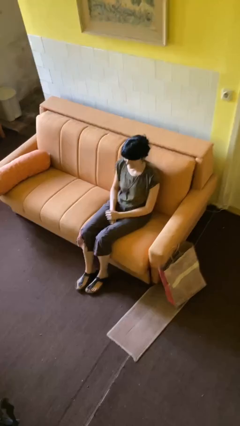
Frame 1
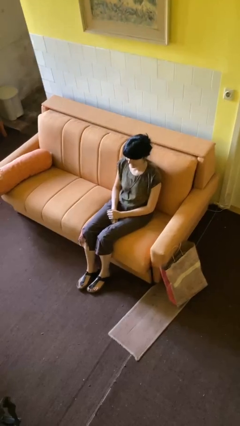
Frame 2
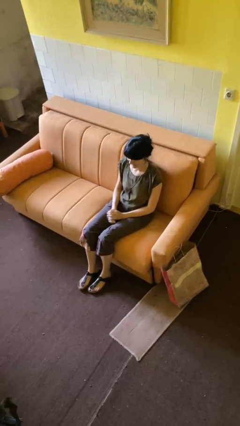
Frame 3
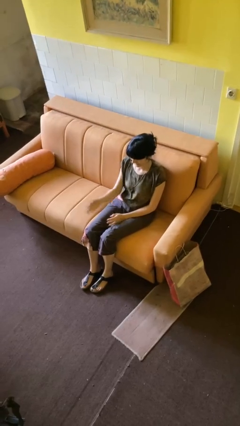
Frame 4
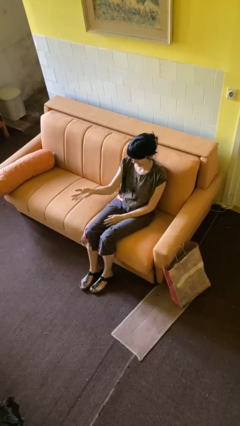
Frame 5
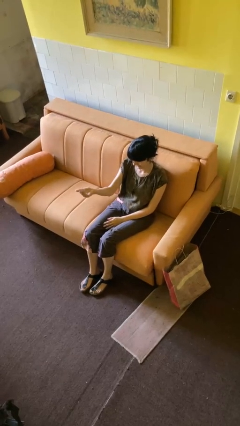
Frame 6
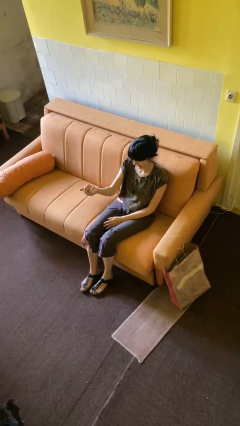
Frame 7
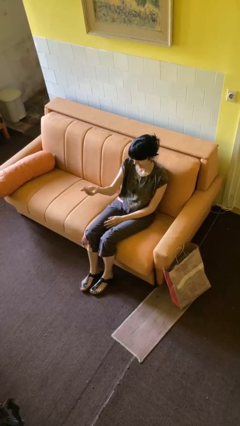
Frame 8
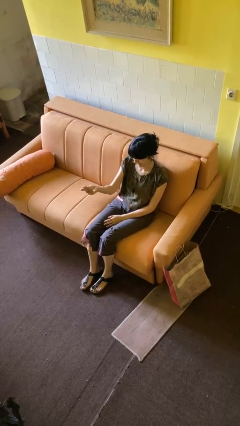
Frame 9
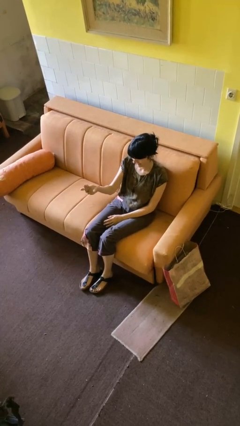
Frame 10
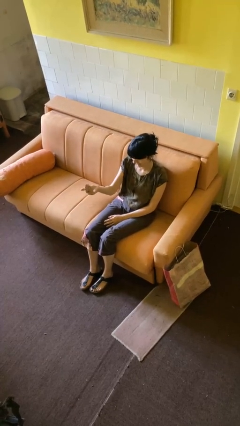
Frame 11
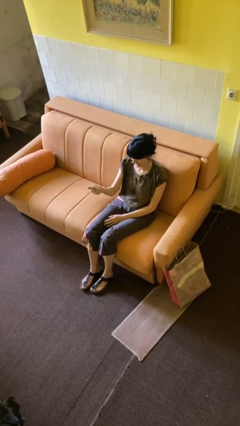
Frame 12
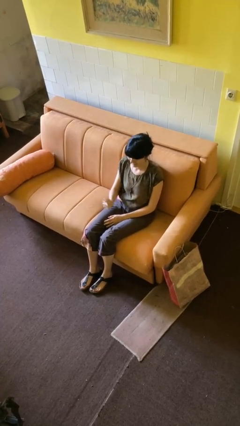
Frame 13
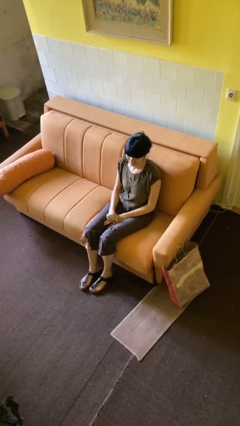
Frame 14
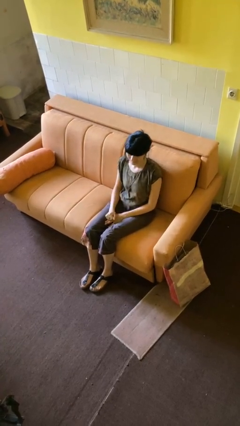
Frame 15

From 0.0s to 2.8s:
person gestures come here

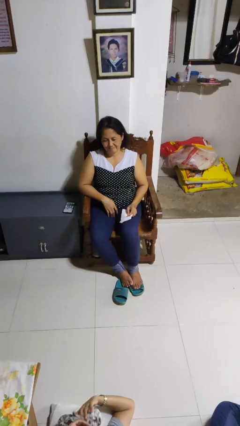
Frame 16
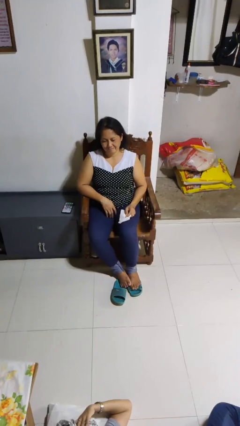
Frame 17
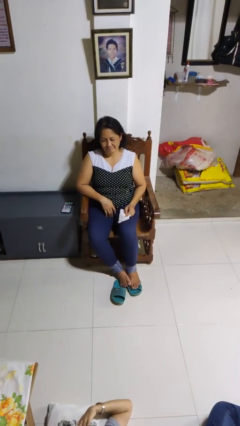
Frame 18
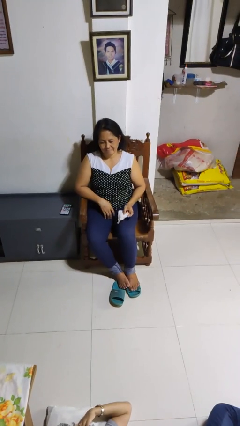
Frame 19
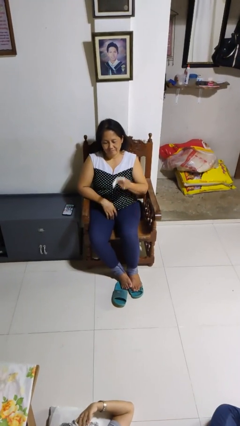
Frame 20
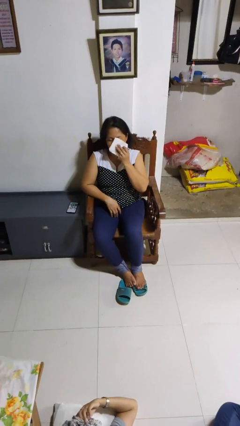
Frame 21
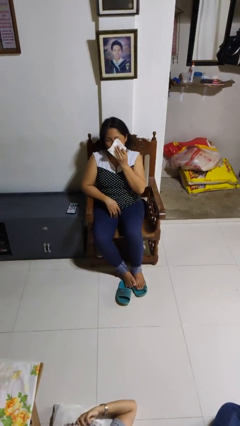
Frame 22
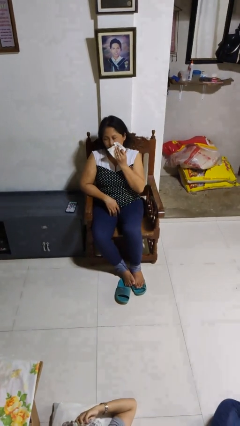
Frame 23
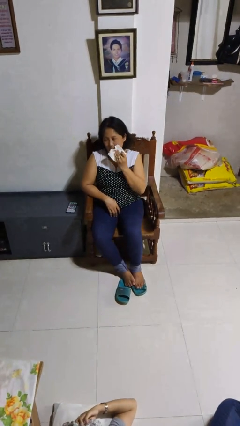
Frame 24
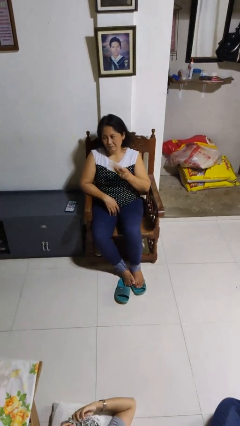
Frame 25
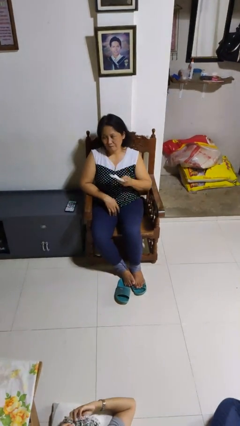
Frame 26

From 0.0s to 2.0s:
person wipes mouth with napkin

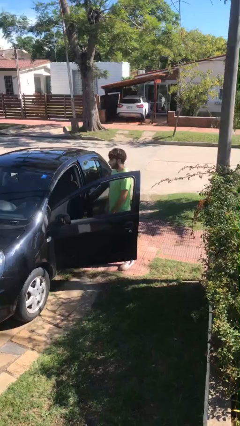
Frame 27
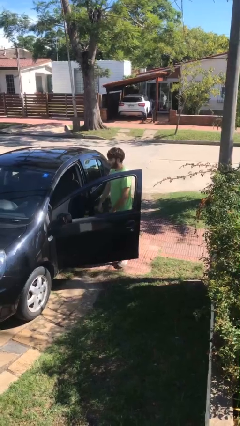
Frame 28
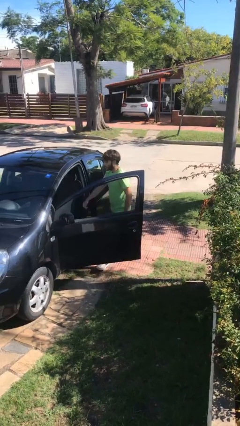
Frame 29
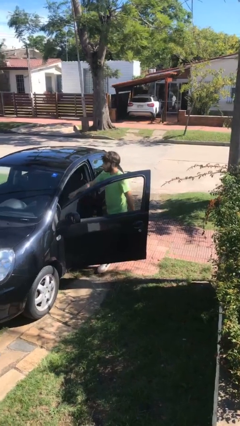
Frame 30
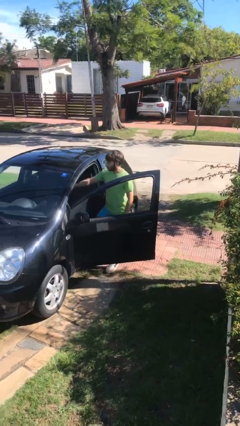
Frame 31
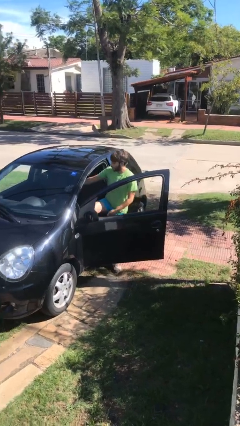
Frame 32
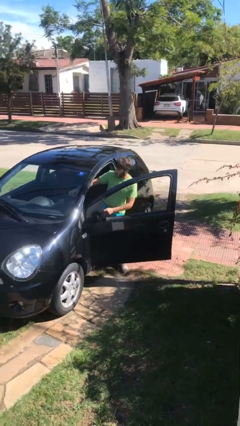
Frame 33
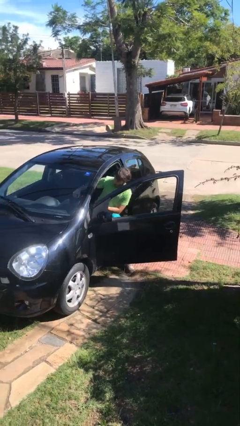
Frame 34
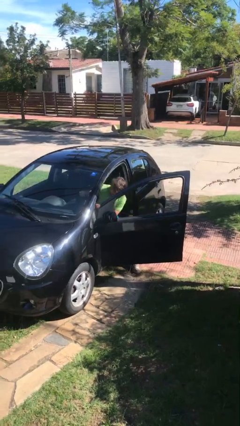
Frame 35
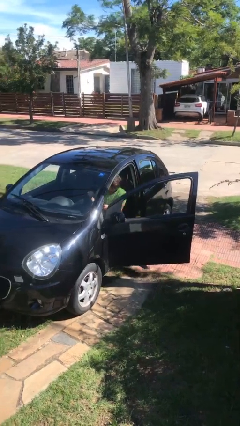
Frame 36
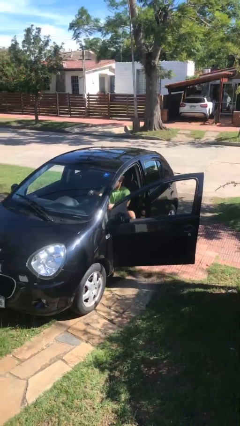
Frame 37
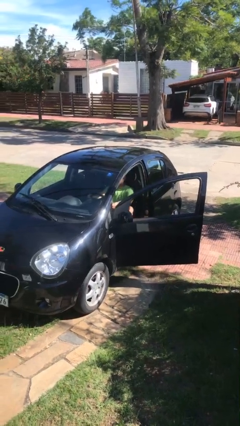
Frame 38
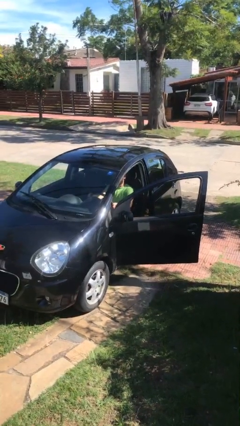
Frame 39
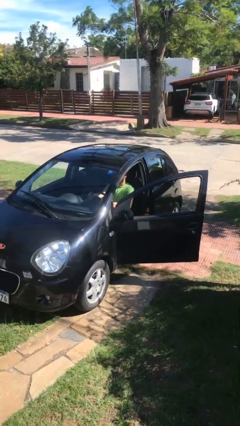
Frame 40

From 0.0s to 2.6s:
person enters car

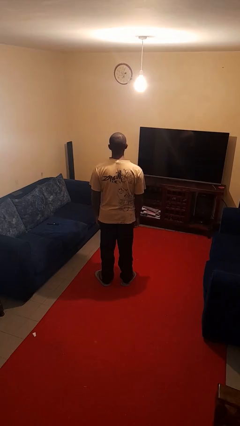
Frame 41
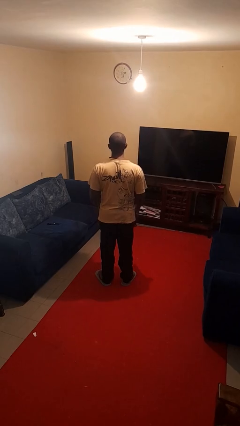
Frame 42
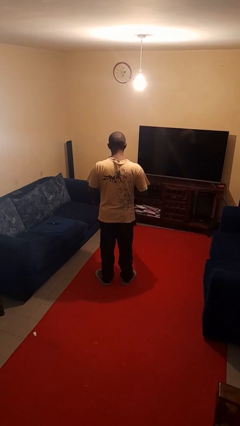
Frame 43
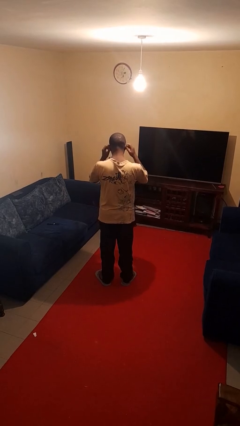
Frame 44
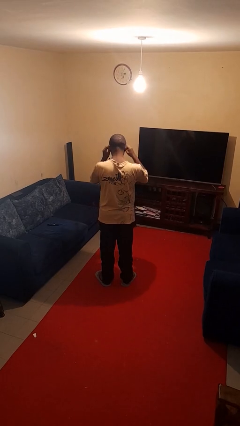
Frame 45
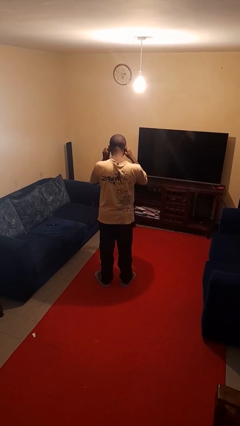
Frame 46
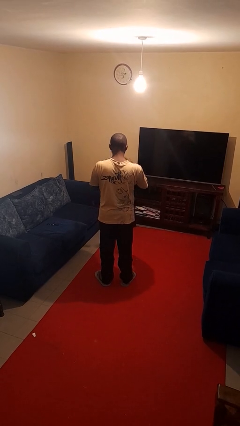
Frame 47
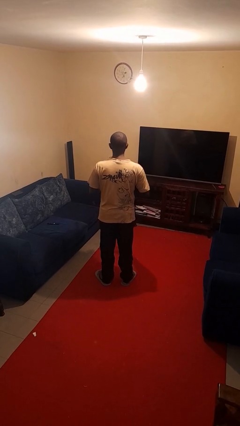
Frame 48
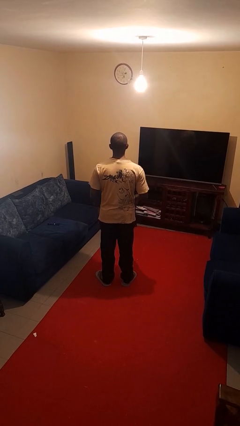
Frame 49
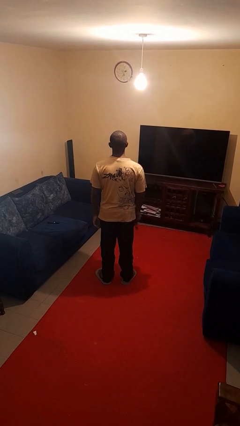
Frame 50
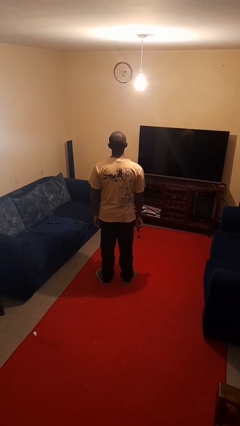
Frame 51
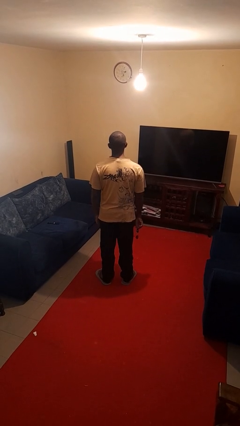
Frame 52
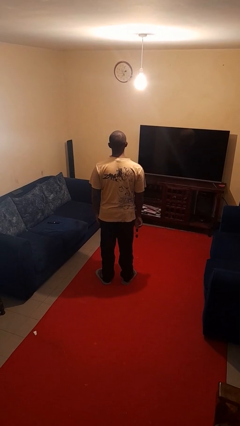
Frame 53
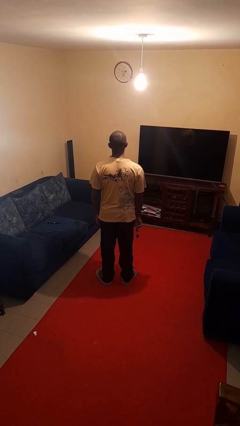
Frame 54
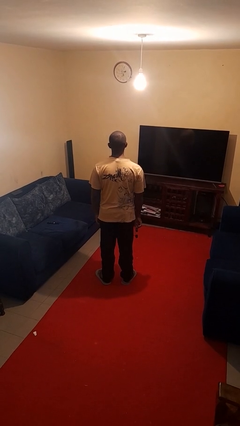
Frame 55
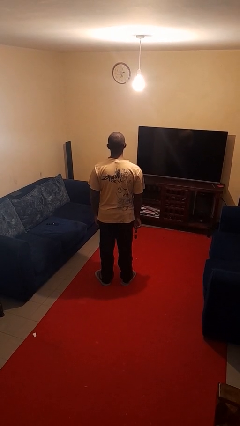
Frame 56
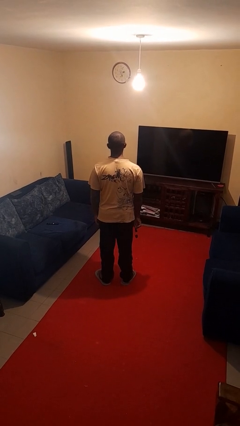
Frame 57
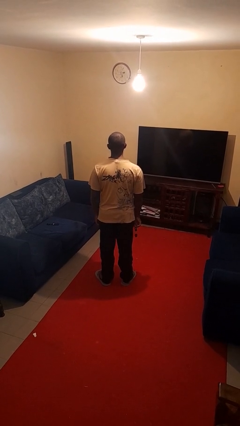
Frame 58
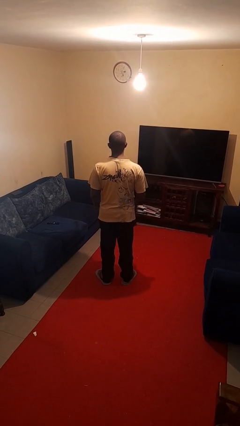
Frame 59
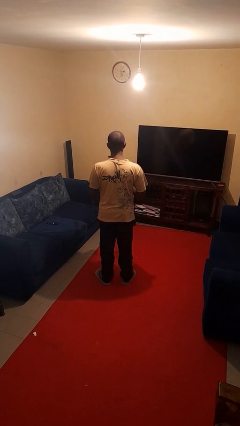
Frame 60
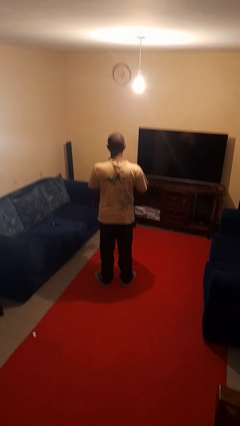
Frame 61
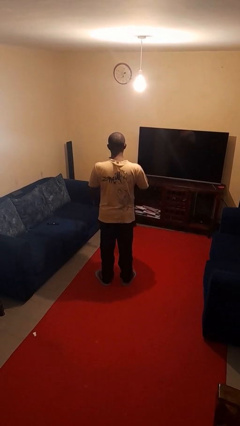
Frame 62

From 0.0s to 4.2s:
person takes off sunglasses

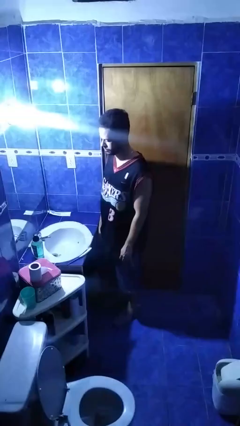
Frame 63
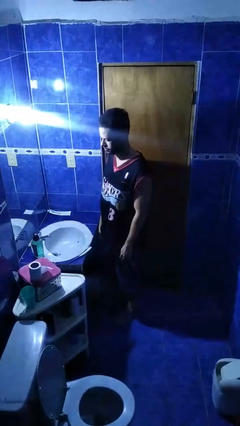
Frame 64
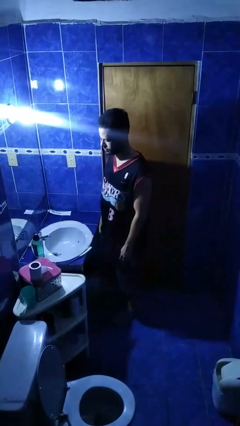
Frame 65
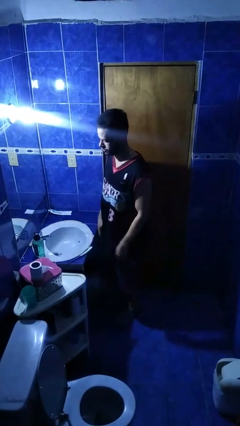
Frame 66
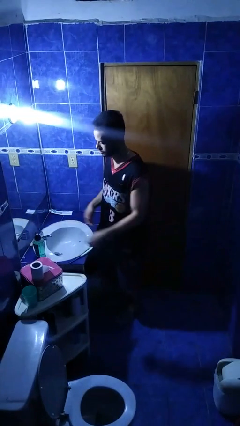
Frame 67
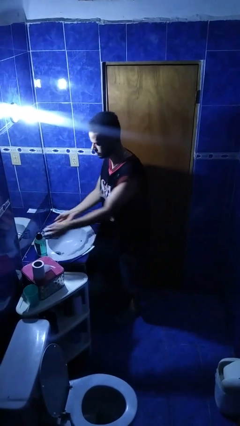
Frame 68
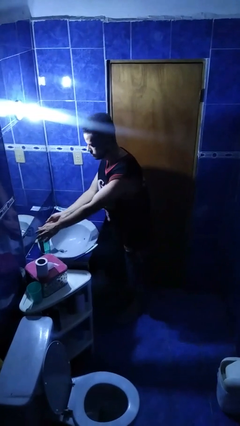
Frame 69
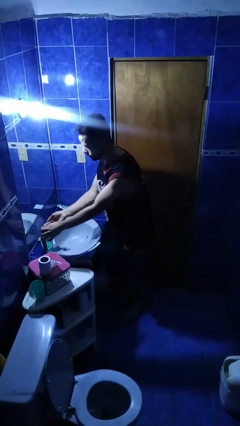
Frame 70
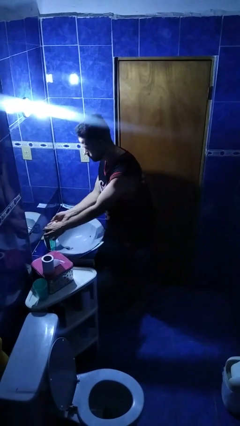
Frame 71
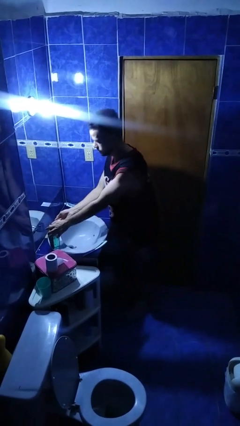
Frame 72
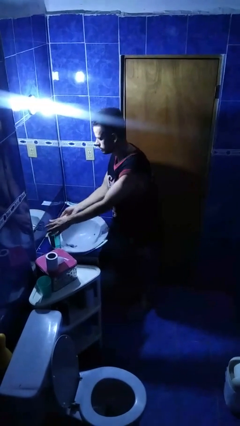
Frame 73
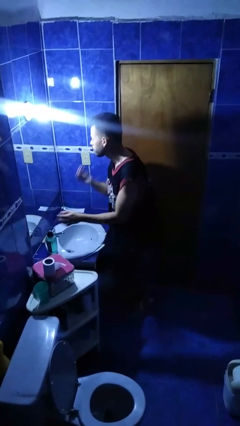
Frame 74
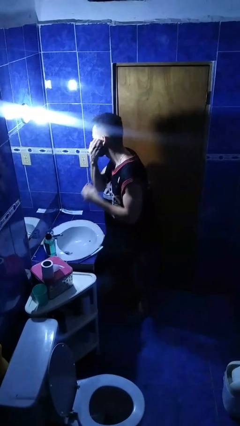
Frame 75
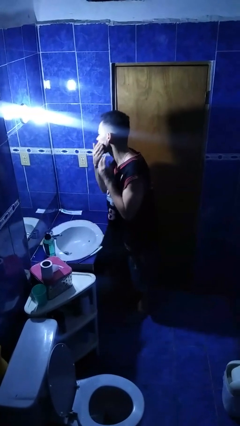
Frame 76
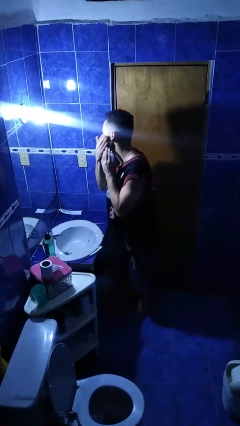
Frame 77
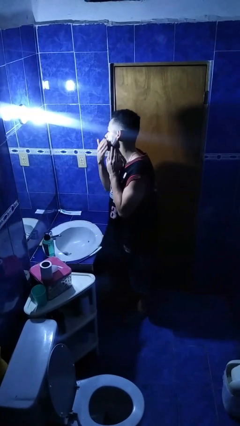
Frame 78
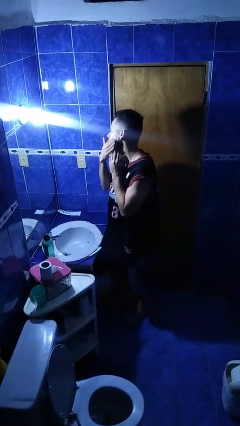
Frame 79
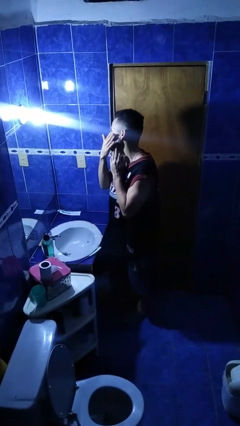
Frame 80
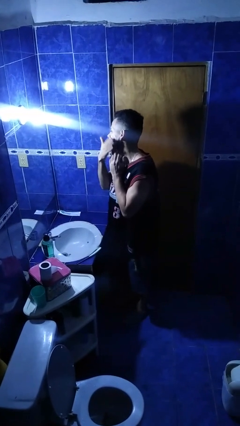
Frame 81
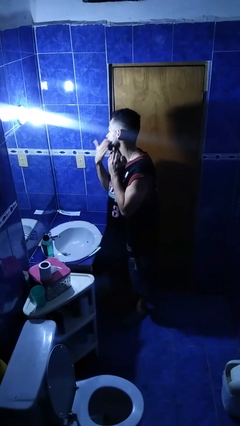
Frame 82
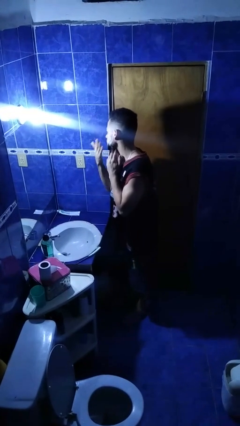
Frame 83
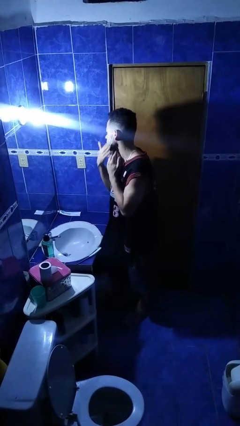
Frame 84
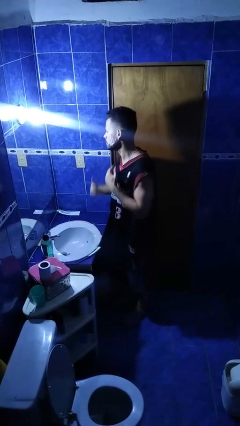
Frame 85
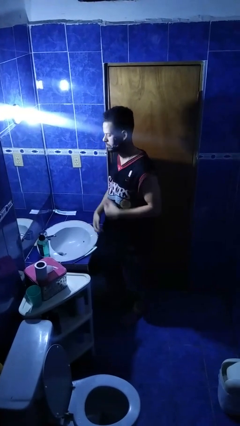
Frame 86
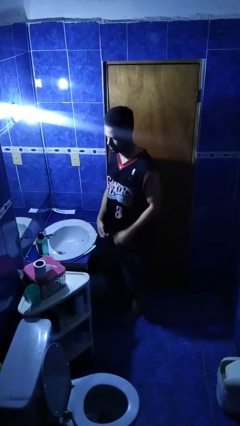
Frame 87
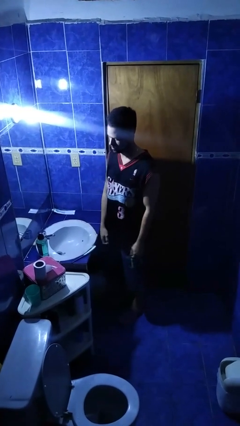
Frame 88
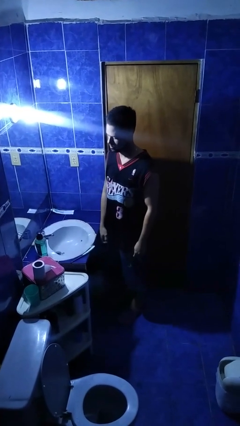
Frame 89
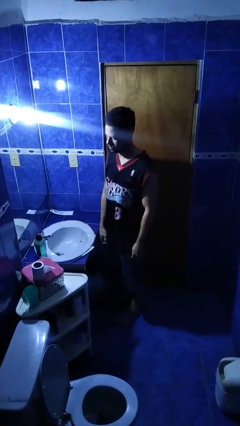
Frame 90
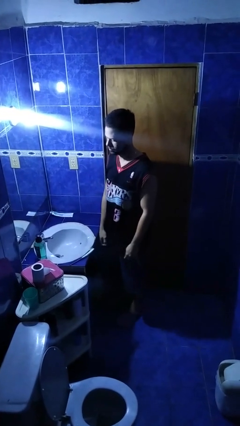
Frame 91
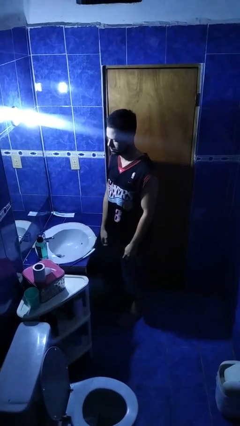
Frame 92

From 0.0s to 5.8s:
person applies shaving cream

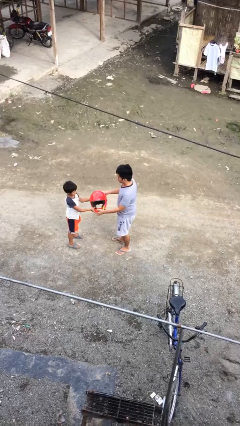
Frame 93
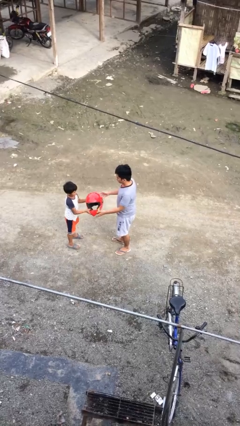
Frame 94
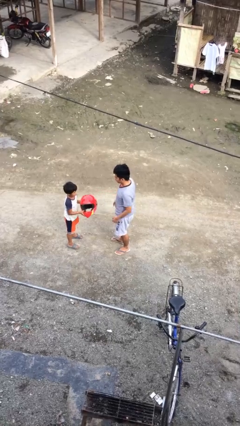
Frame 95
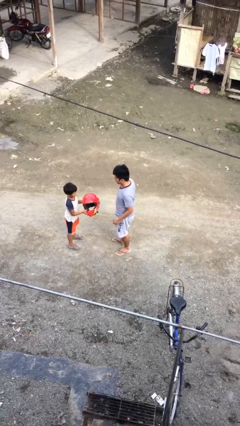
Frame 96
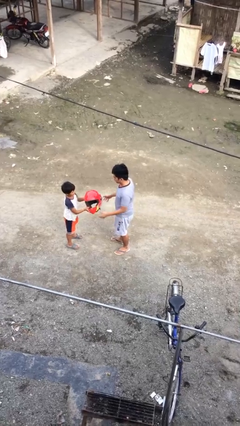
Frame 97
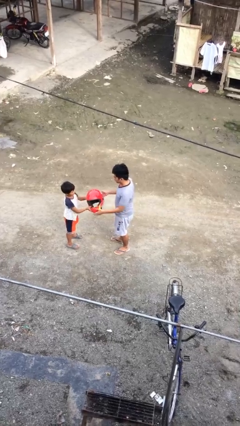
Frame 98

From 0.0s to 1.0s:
person transfers object to person
